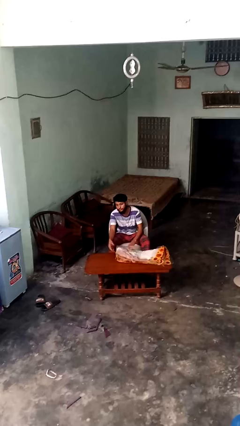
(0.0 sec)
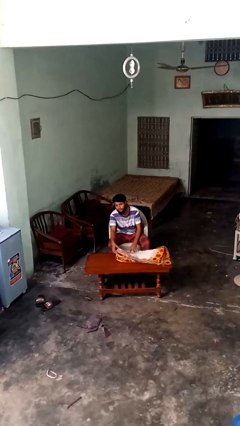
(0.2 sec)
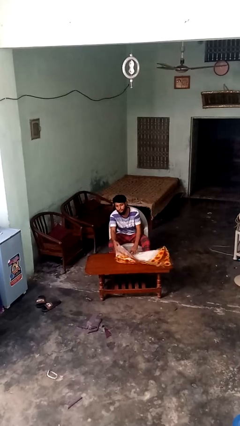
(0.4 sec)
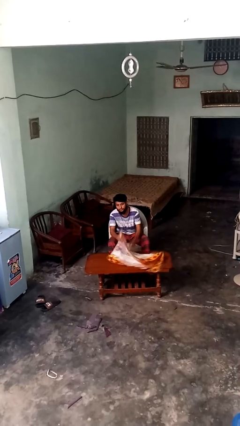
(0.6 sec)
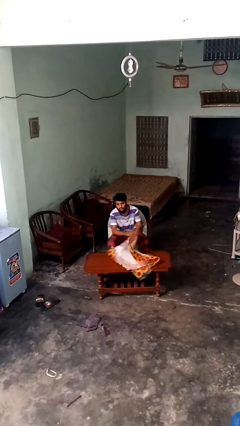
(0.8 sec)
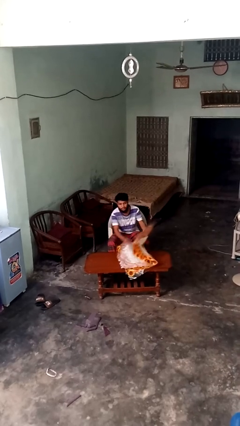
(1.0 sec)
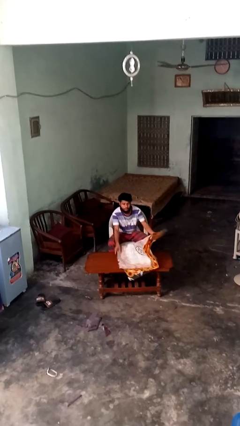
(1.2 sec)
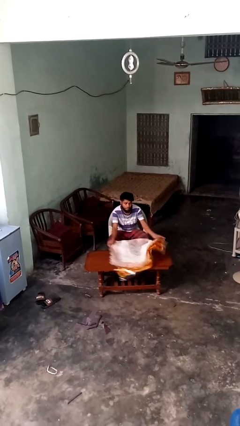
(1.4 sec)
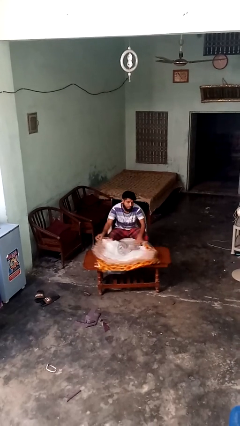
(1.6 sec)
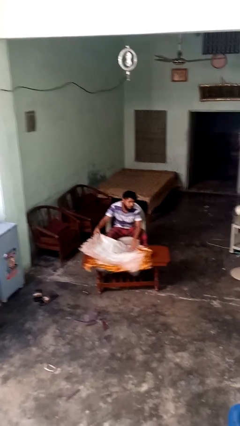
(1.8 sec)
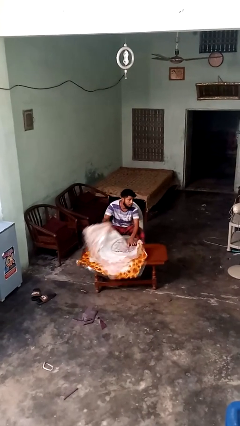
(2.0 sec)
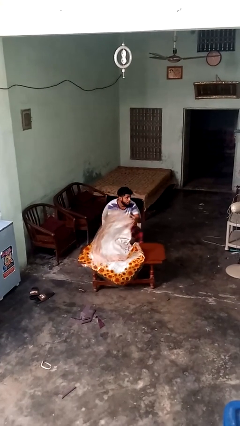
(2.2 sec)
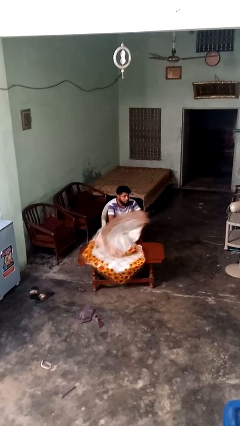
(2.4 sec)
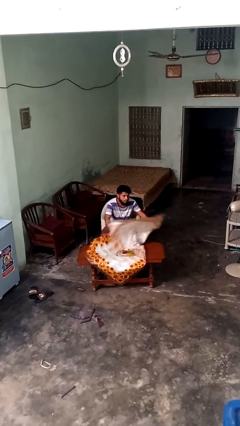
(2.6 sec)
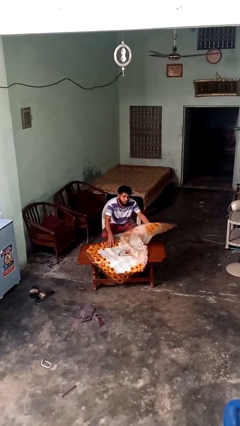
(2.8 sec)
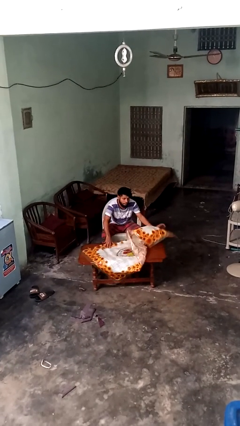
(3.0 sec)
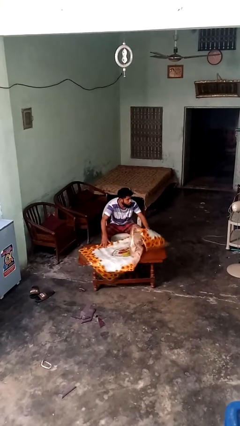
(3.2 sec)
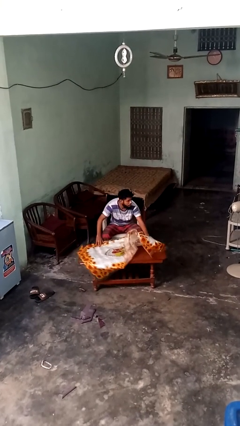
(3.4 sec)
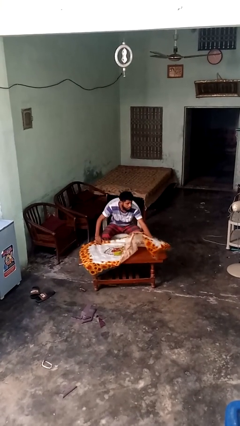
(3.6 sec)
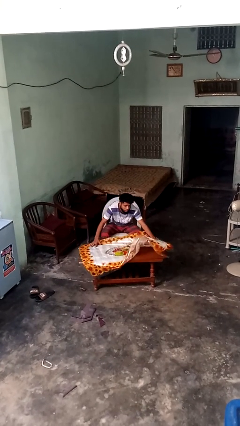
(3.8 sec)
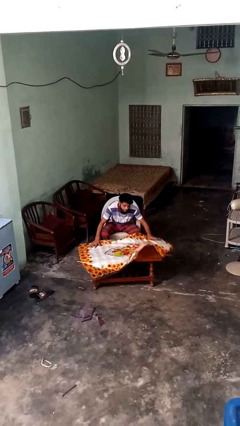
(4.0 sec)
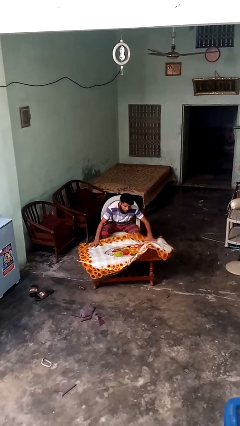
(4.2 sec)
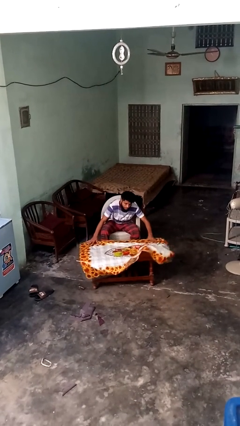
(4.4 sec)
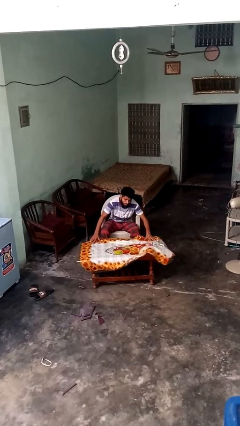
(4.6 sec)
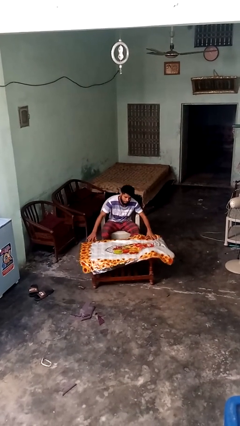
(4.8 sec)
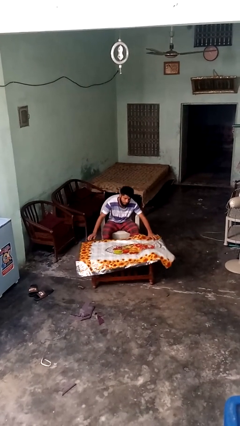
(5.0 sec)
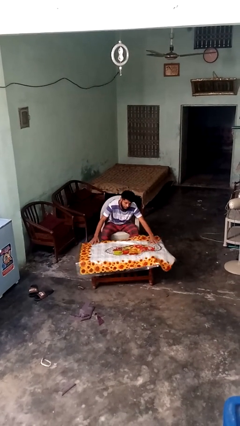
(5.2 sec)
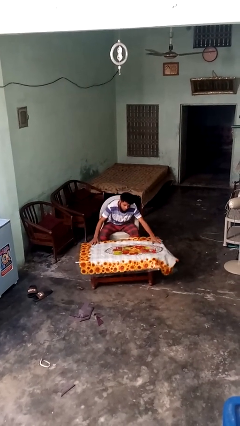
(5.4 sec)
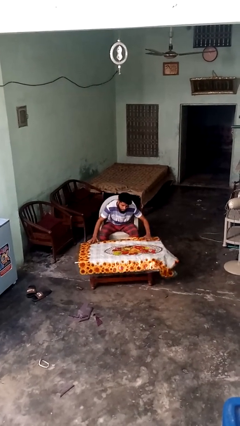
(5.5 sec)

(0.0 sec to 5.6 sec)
person spreads tablecloth

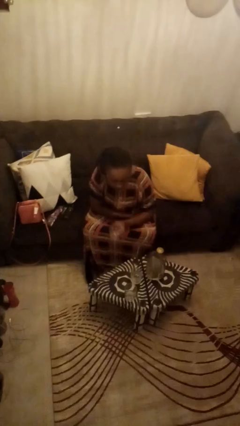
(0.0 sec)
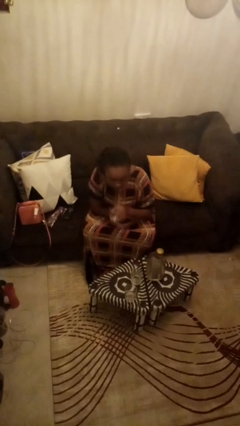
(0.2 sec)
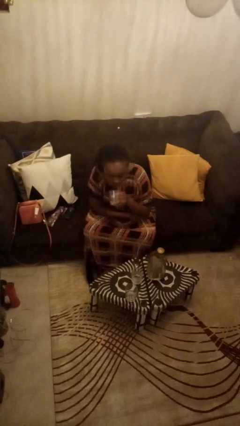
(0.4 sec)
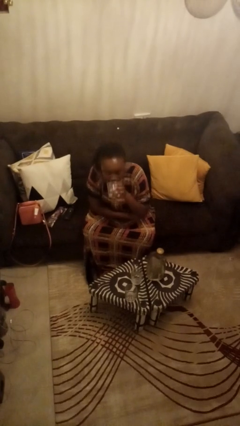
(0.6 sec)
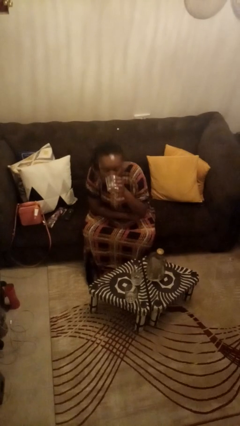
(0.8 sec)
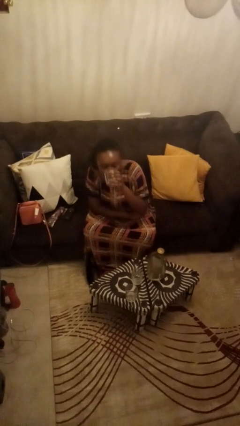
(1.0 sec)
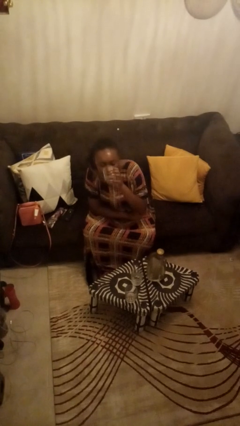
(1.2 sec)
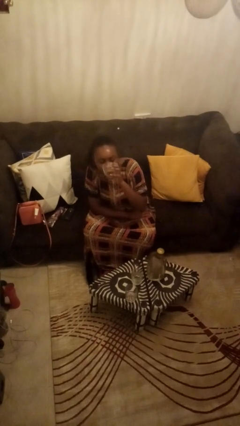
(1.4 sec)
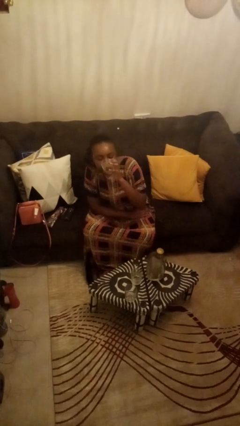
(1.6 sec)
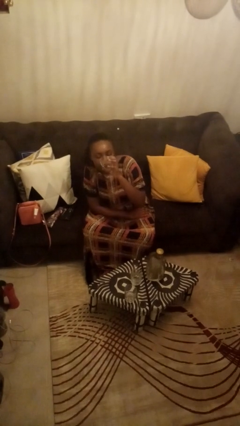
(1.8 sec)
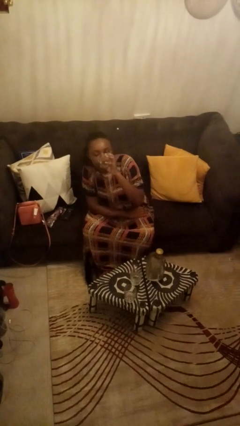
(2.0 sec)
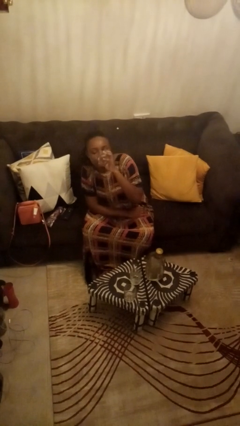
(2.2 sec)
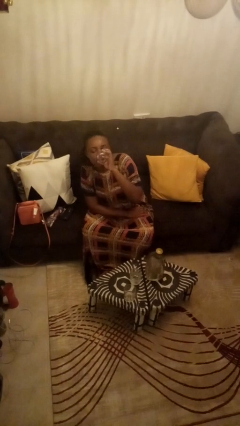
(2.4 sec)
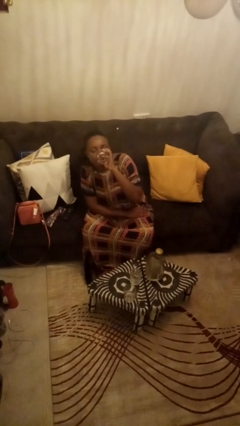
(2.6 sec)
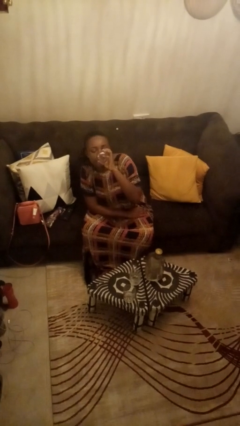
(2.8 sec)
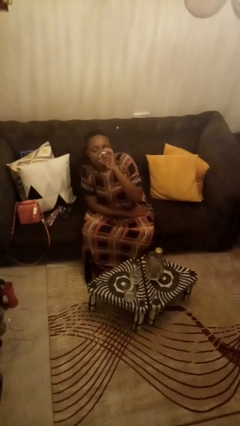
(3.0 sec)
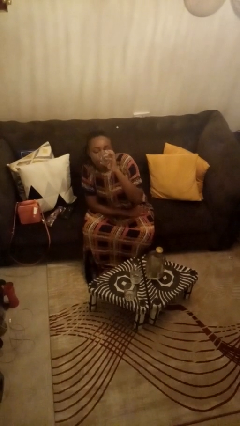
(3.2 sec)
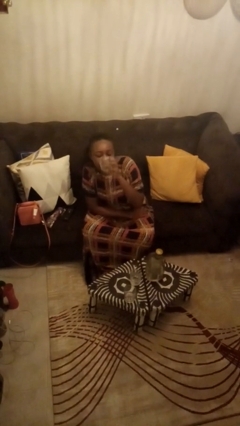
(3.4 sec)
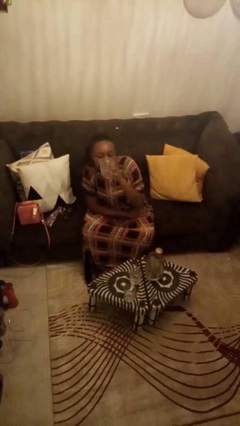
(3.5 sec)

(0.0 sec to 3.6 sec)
person drinks from shotglass

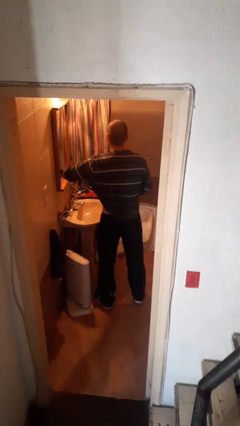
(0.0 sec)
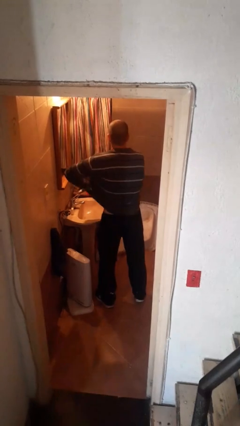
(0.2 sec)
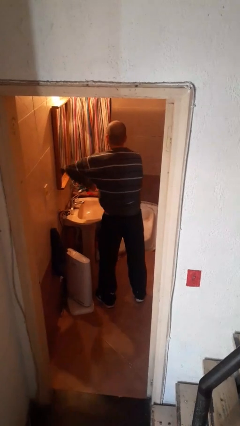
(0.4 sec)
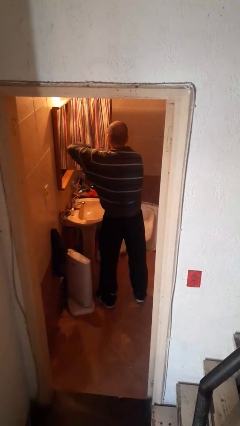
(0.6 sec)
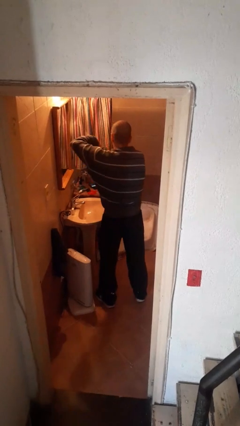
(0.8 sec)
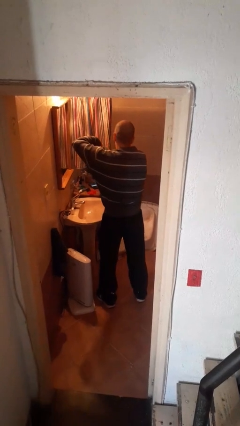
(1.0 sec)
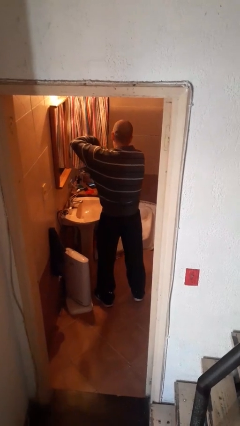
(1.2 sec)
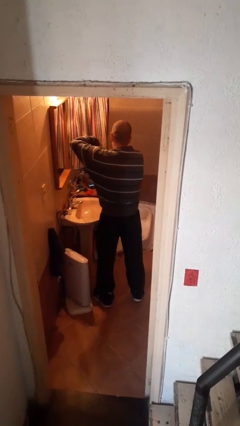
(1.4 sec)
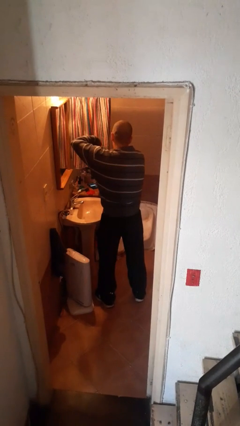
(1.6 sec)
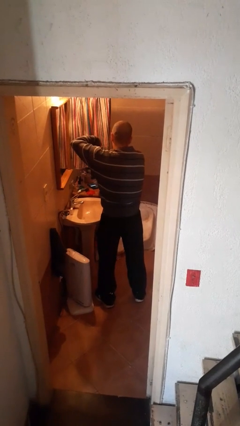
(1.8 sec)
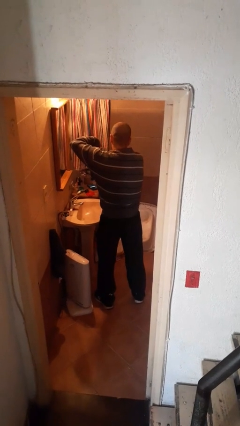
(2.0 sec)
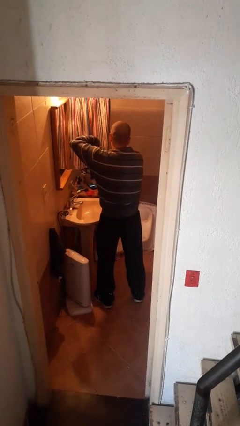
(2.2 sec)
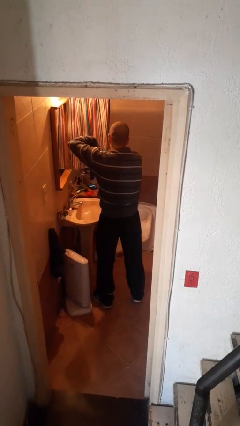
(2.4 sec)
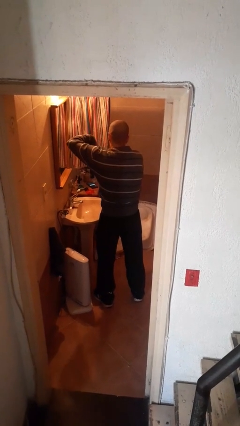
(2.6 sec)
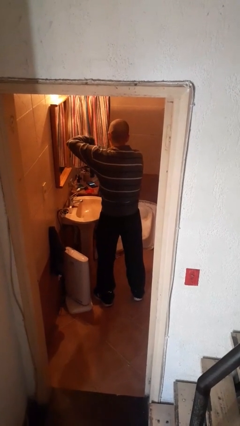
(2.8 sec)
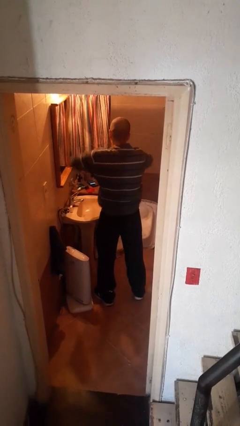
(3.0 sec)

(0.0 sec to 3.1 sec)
person applies deodorant

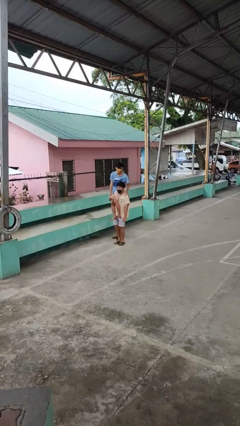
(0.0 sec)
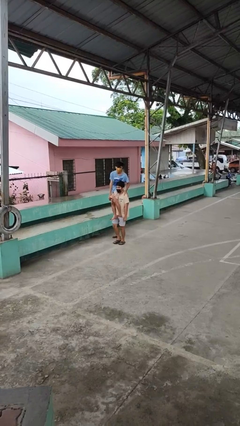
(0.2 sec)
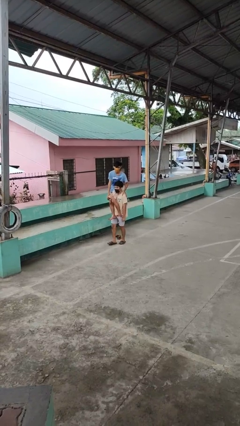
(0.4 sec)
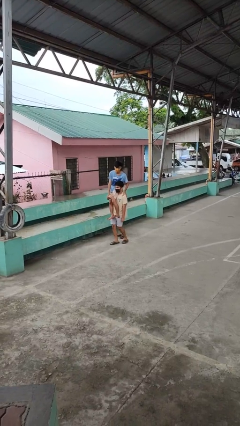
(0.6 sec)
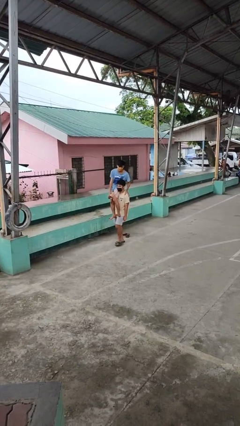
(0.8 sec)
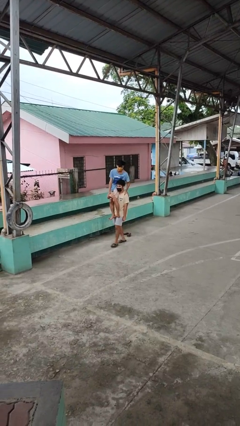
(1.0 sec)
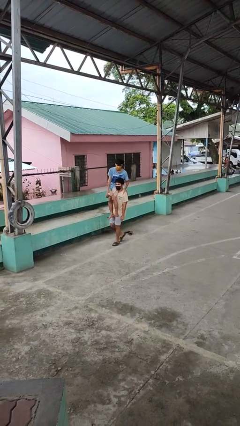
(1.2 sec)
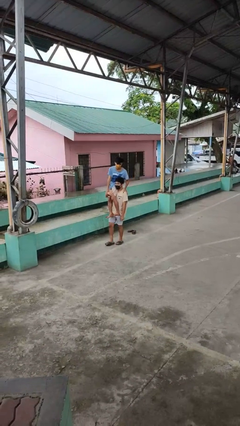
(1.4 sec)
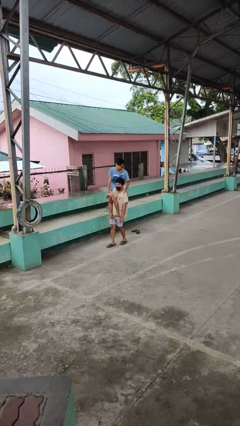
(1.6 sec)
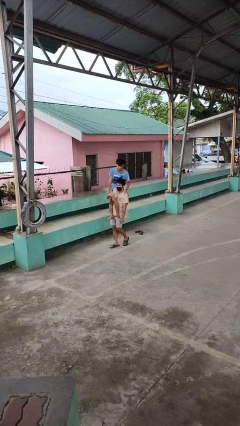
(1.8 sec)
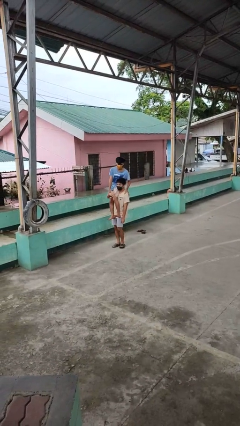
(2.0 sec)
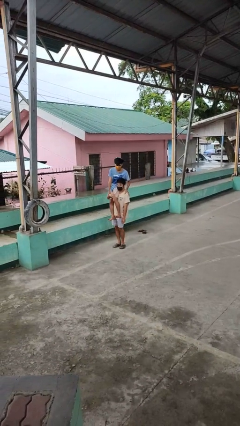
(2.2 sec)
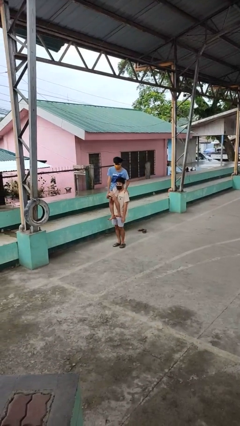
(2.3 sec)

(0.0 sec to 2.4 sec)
person carries person on shoulders

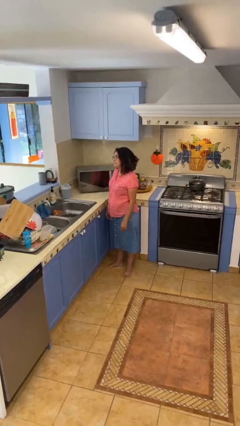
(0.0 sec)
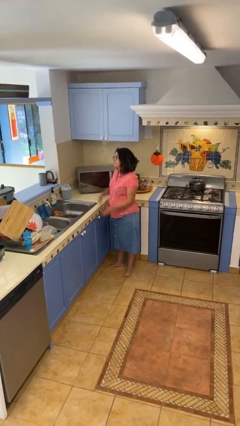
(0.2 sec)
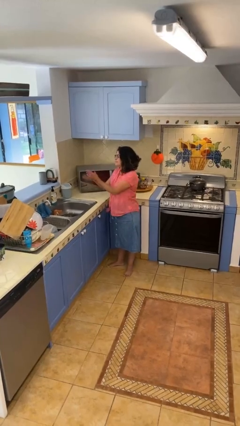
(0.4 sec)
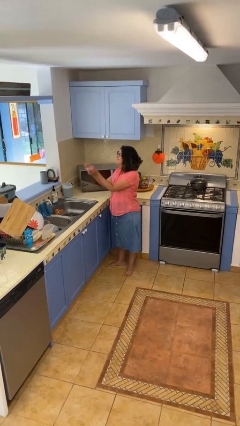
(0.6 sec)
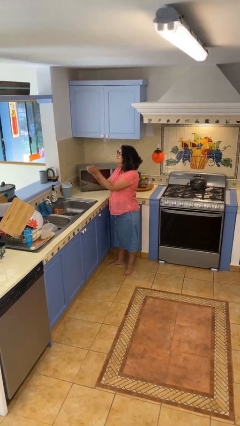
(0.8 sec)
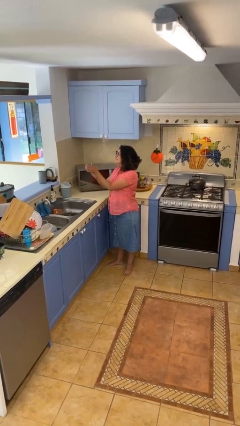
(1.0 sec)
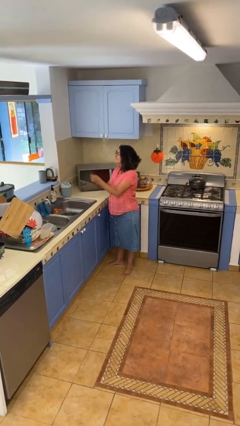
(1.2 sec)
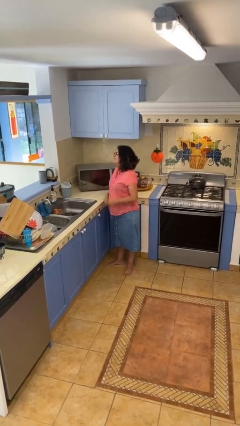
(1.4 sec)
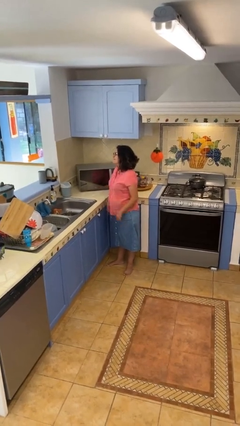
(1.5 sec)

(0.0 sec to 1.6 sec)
person claps hands

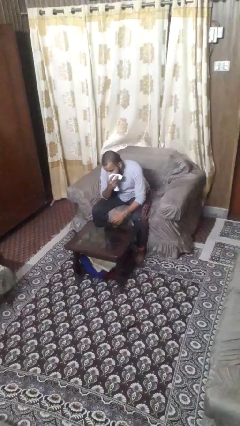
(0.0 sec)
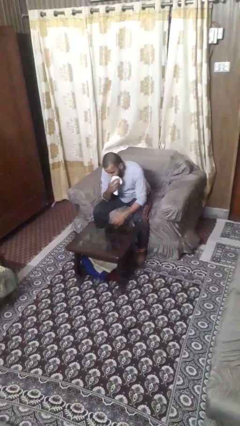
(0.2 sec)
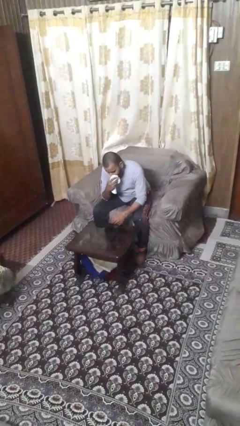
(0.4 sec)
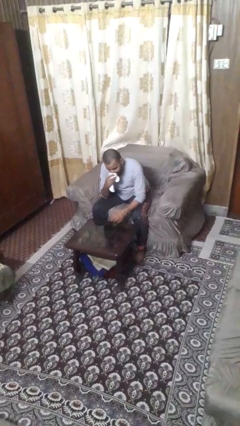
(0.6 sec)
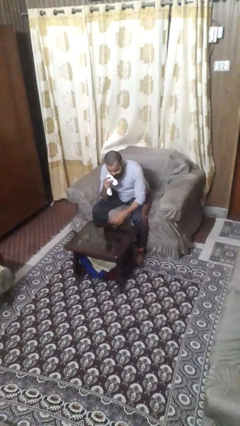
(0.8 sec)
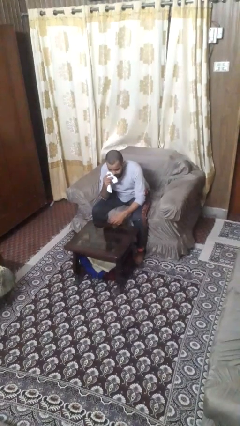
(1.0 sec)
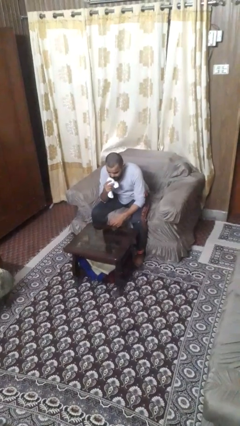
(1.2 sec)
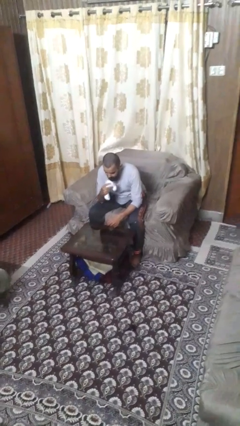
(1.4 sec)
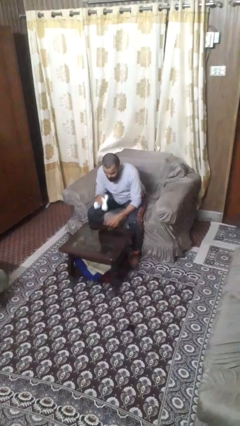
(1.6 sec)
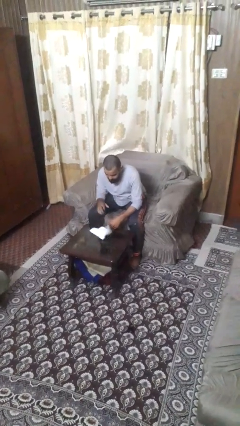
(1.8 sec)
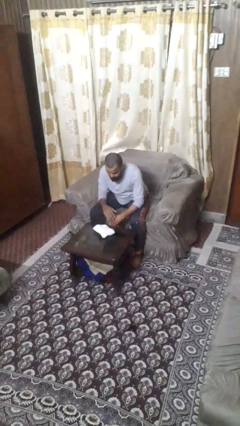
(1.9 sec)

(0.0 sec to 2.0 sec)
person wipes mouth with napkin
